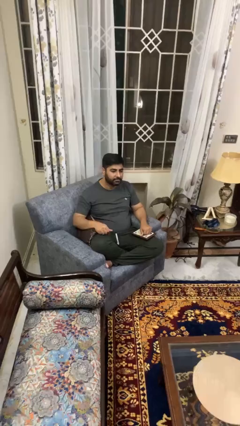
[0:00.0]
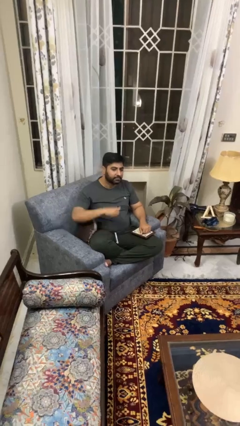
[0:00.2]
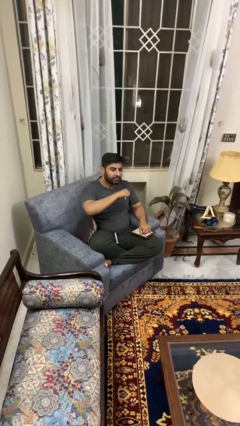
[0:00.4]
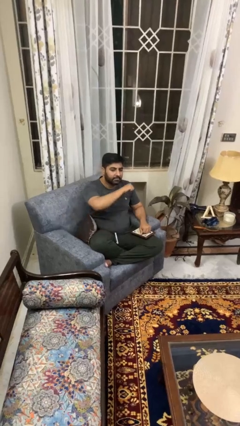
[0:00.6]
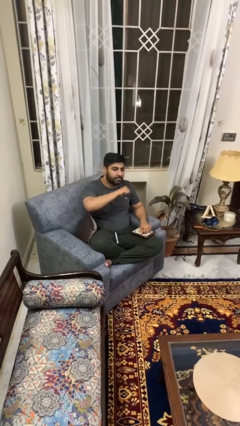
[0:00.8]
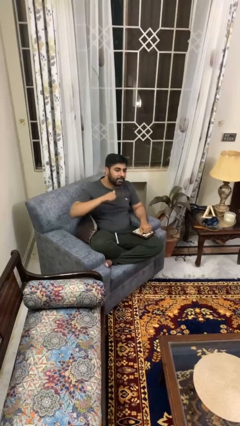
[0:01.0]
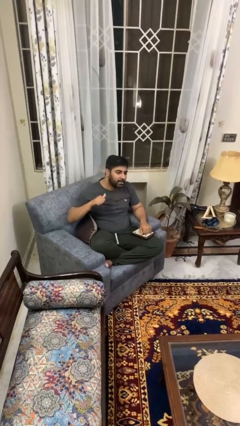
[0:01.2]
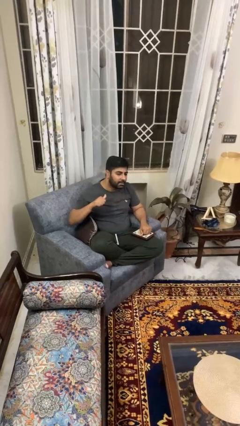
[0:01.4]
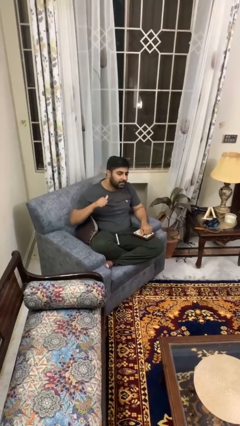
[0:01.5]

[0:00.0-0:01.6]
person gestures cut

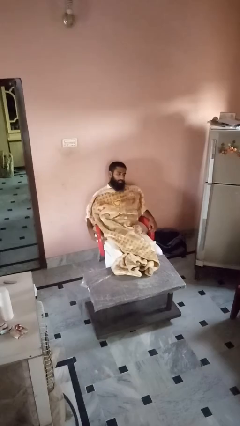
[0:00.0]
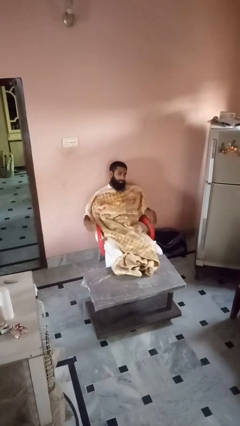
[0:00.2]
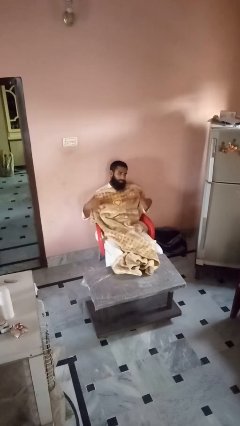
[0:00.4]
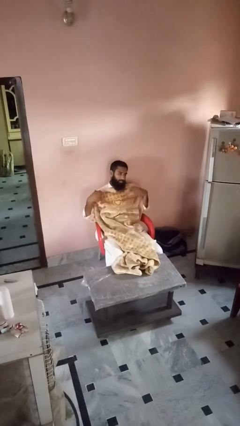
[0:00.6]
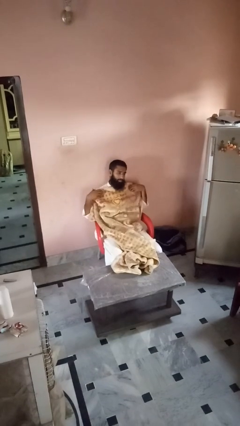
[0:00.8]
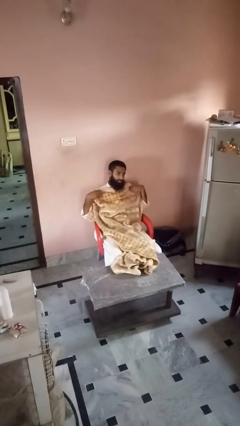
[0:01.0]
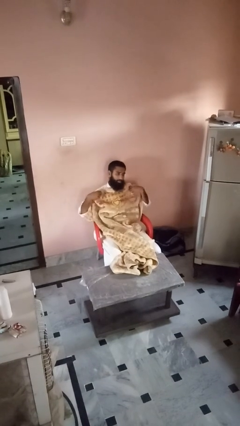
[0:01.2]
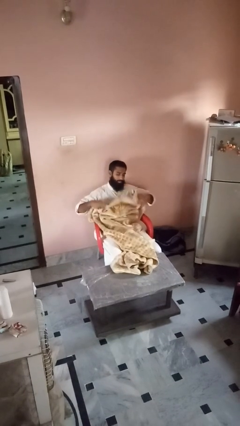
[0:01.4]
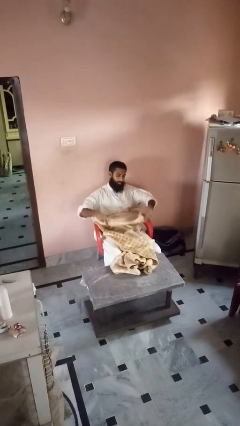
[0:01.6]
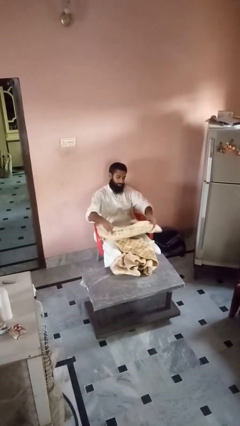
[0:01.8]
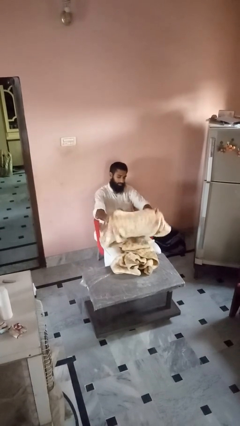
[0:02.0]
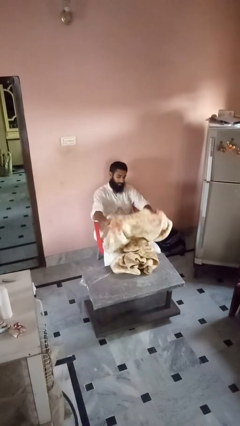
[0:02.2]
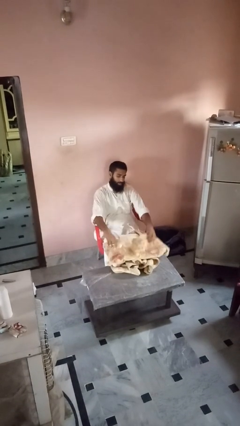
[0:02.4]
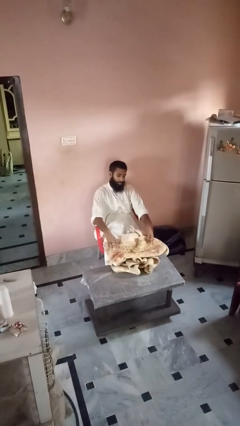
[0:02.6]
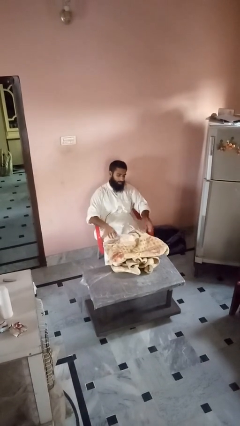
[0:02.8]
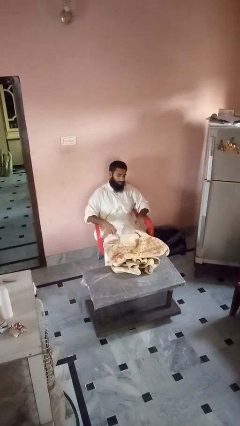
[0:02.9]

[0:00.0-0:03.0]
person uncovers with blanket

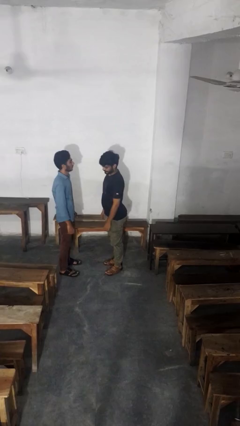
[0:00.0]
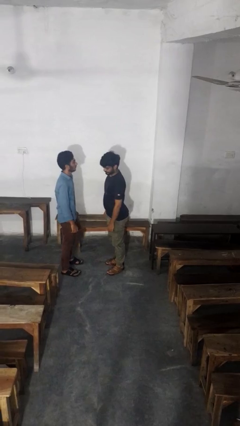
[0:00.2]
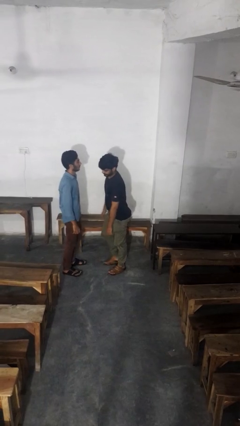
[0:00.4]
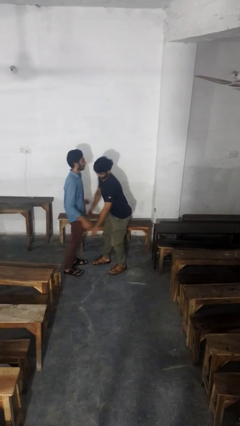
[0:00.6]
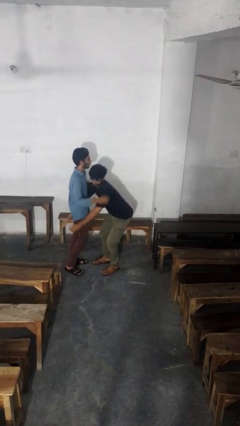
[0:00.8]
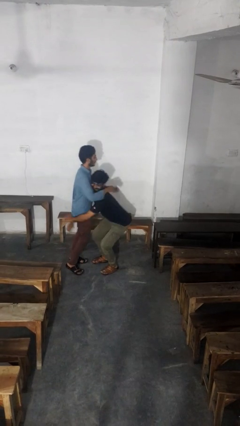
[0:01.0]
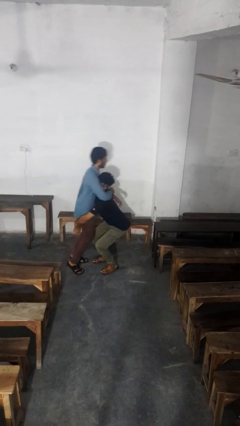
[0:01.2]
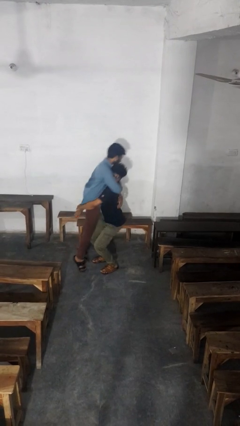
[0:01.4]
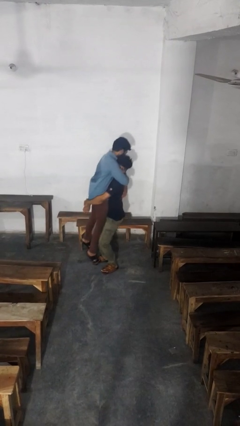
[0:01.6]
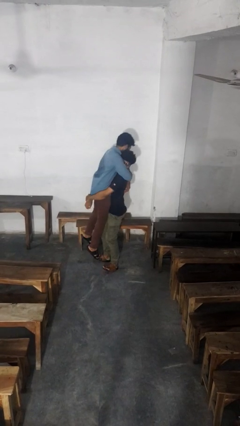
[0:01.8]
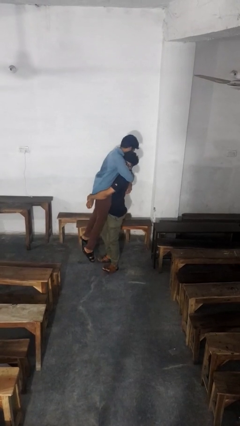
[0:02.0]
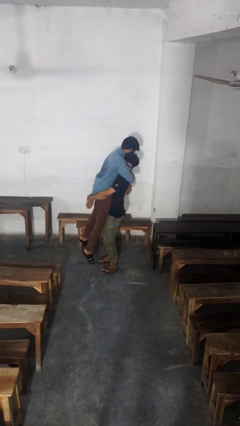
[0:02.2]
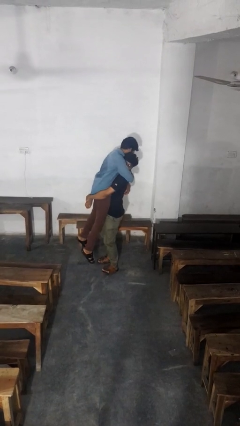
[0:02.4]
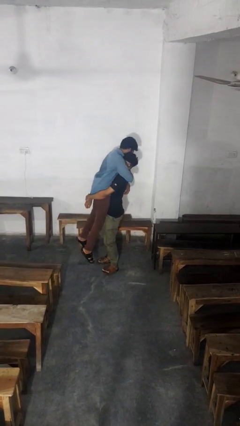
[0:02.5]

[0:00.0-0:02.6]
person picks up person

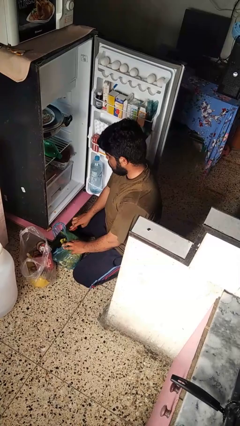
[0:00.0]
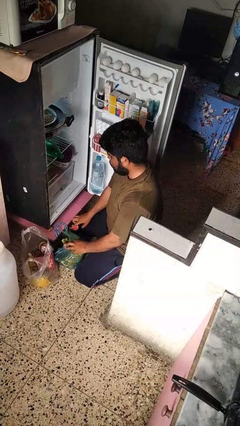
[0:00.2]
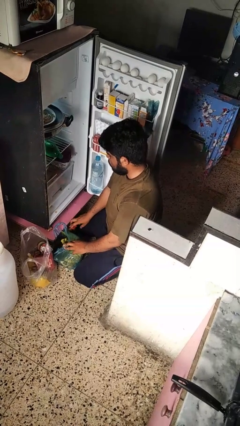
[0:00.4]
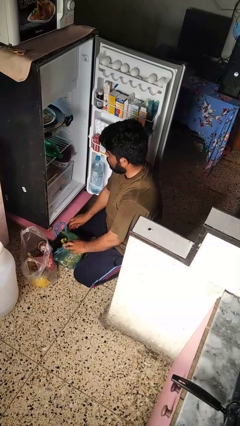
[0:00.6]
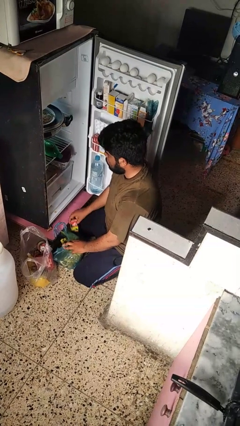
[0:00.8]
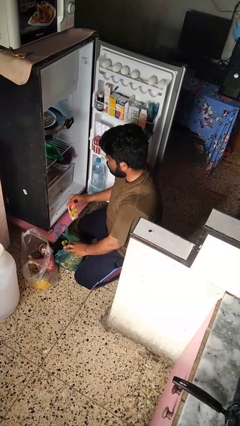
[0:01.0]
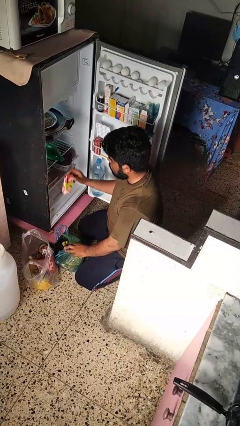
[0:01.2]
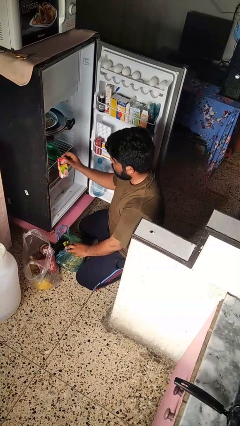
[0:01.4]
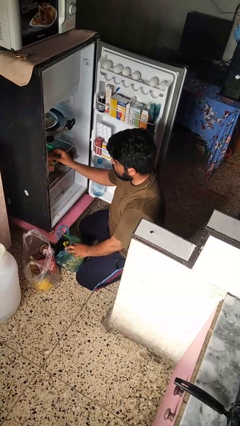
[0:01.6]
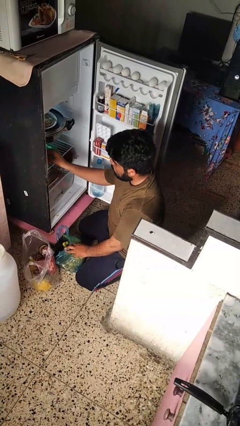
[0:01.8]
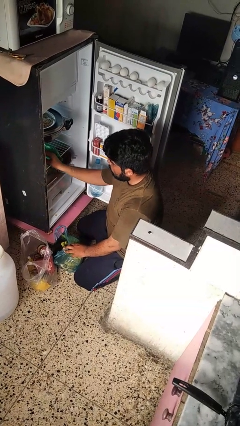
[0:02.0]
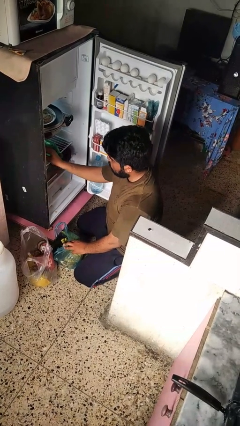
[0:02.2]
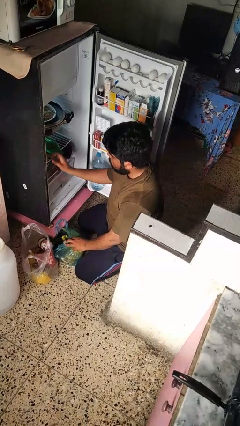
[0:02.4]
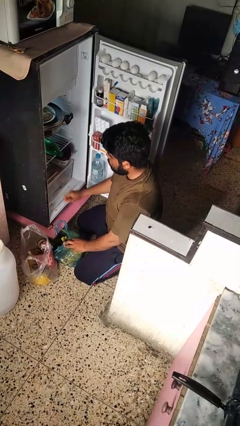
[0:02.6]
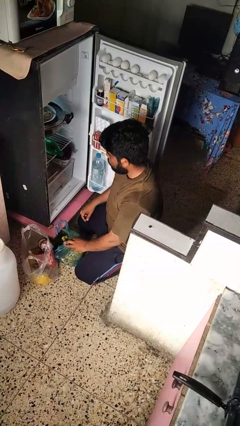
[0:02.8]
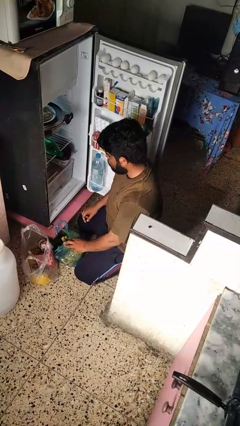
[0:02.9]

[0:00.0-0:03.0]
person loads groceries into refrigerator

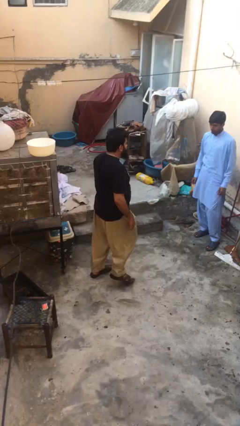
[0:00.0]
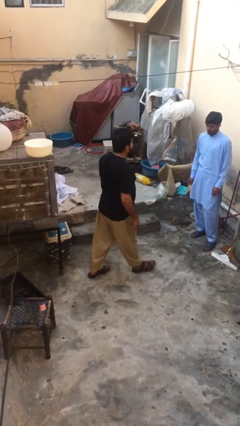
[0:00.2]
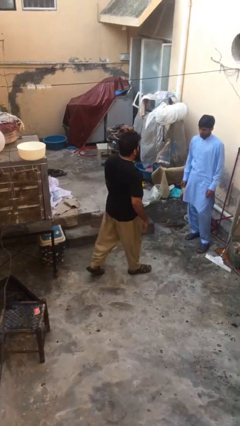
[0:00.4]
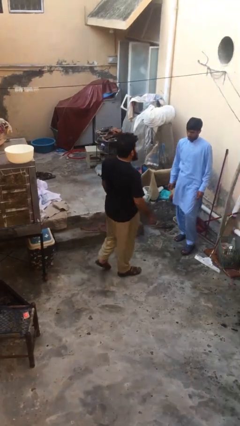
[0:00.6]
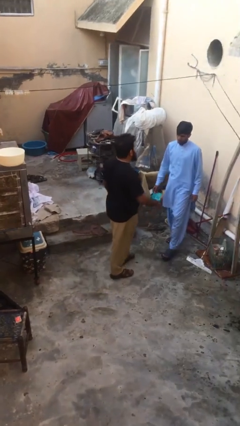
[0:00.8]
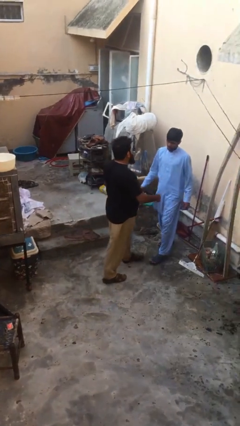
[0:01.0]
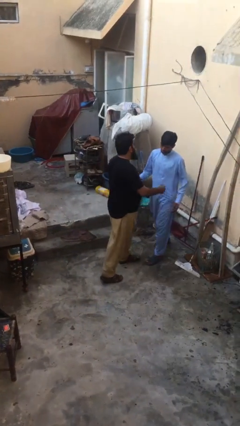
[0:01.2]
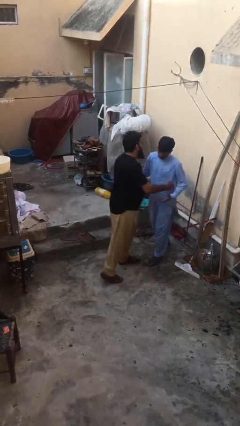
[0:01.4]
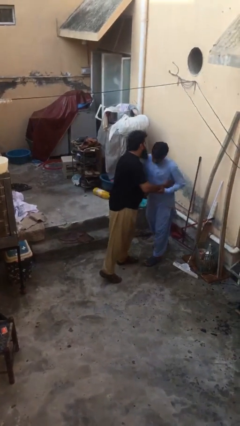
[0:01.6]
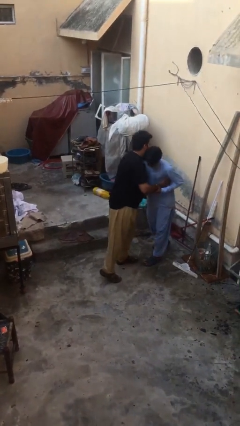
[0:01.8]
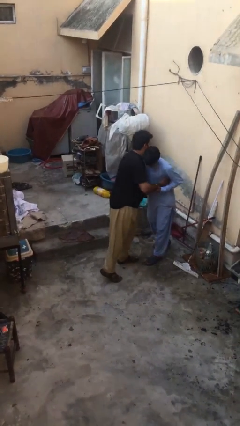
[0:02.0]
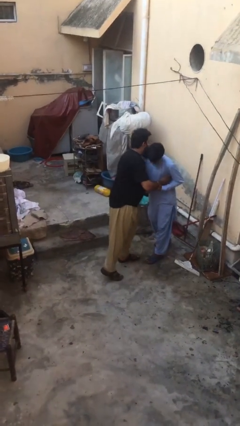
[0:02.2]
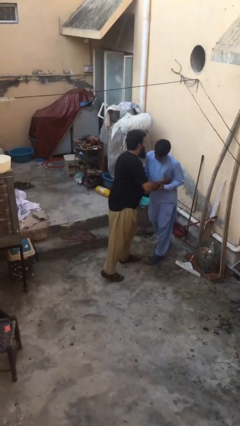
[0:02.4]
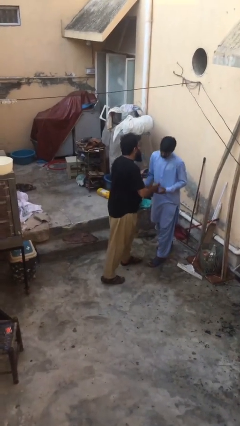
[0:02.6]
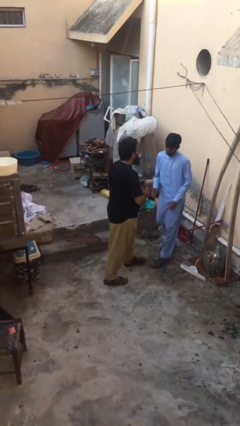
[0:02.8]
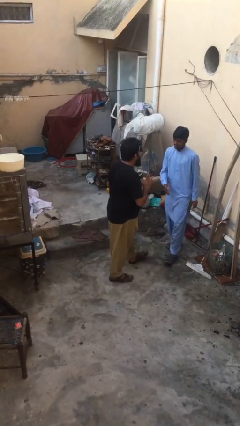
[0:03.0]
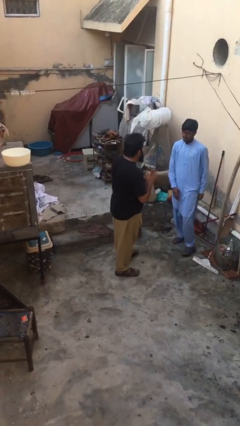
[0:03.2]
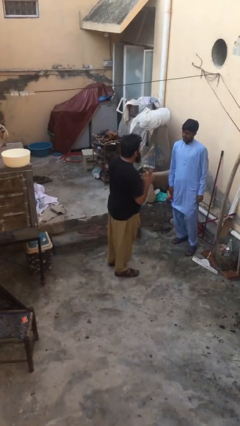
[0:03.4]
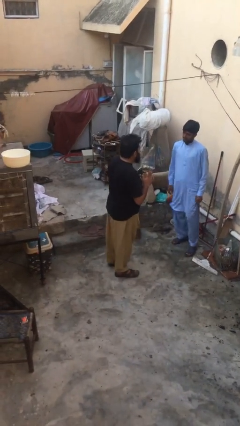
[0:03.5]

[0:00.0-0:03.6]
person embraces person

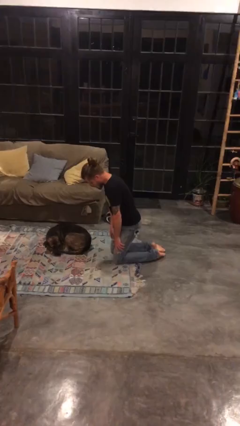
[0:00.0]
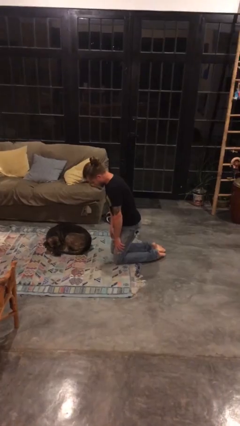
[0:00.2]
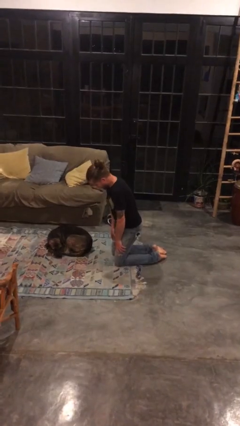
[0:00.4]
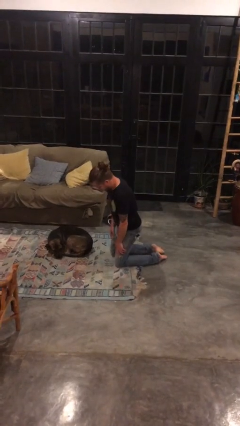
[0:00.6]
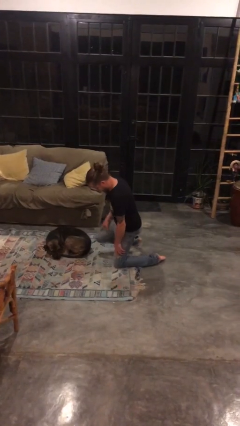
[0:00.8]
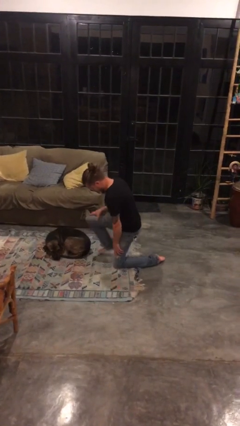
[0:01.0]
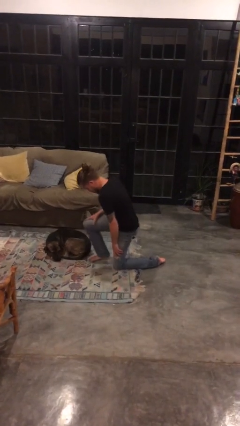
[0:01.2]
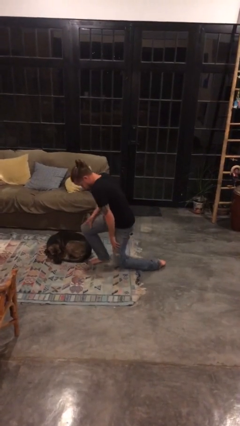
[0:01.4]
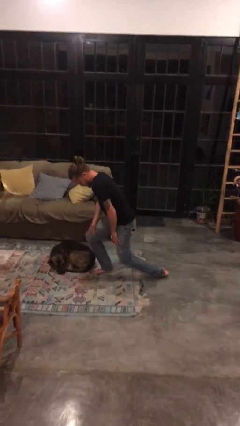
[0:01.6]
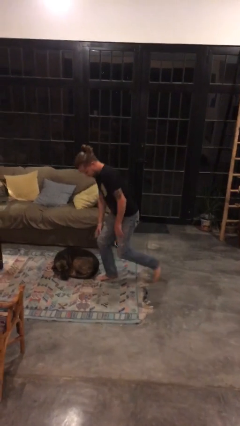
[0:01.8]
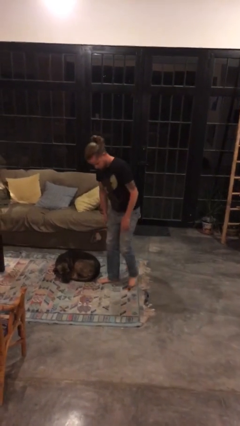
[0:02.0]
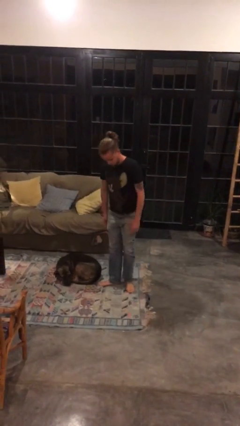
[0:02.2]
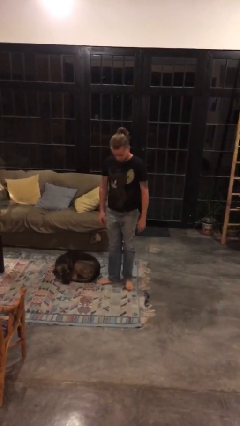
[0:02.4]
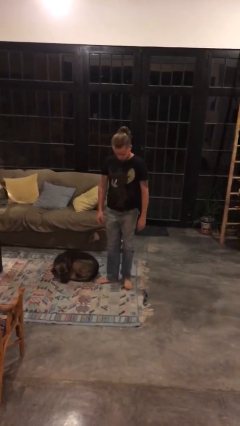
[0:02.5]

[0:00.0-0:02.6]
person stands up from floor

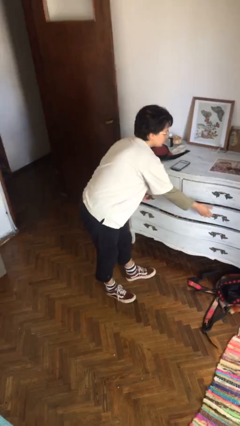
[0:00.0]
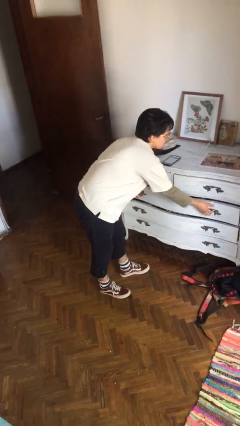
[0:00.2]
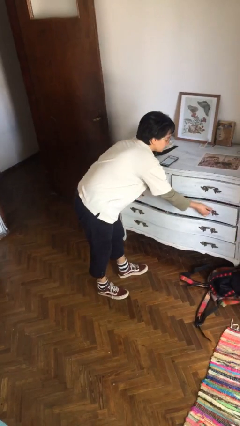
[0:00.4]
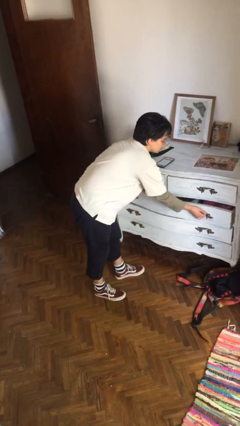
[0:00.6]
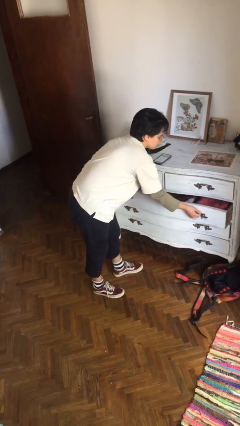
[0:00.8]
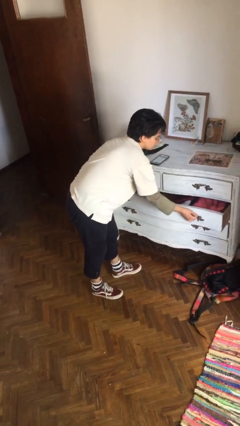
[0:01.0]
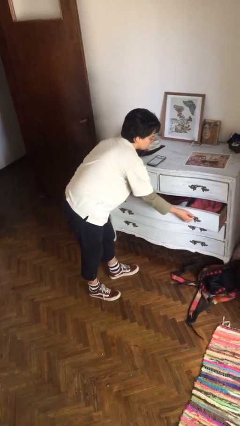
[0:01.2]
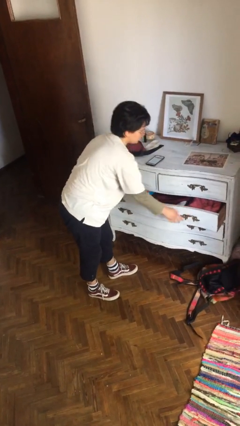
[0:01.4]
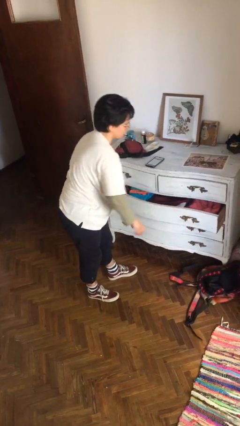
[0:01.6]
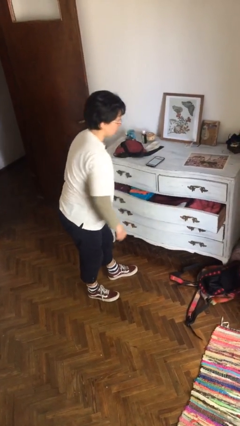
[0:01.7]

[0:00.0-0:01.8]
person opens dresser drawer
